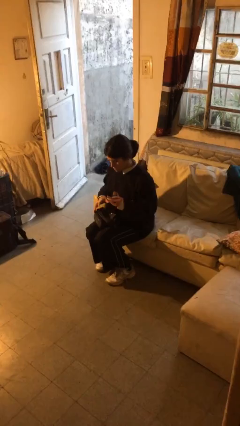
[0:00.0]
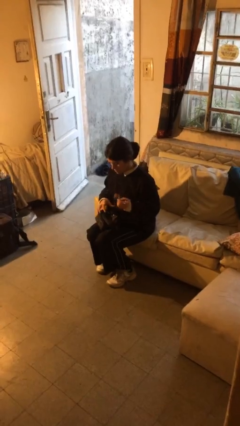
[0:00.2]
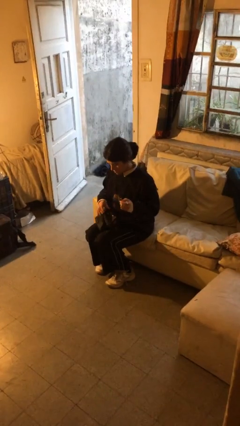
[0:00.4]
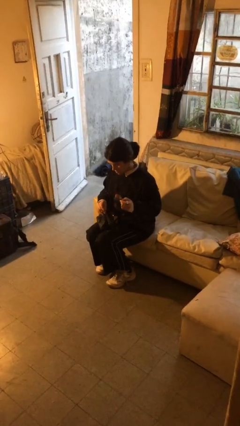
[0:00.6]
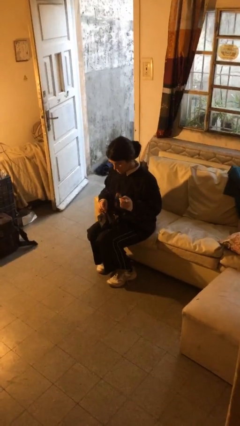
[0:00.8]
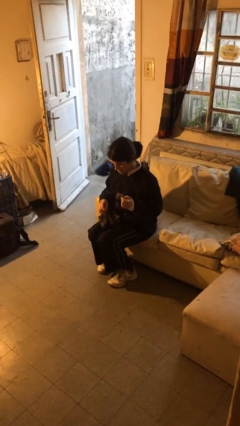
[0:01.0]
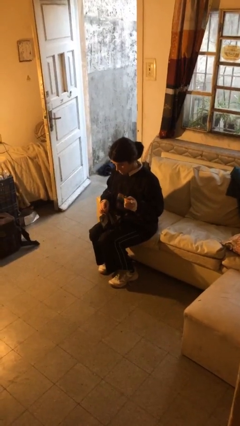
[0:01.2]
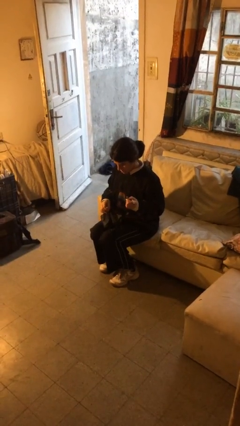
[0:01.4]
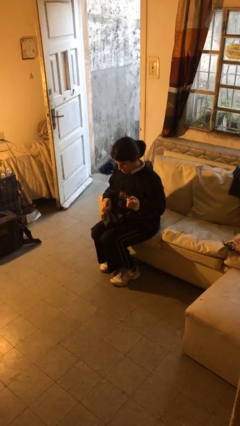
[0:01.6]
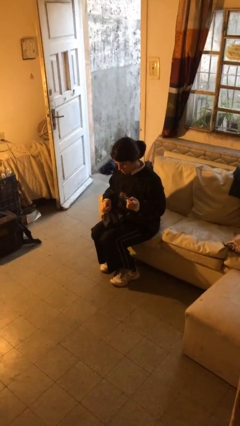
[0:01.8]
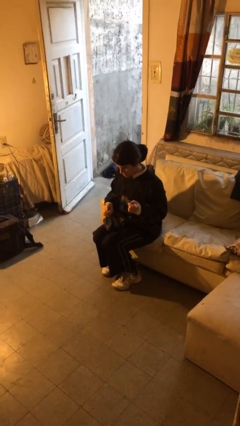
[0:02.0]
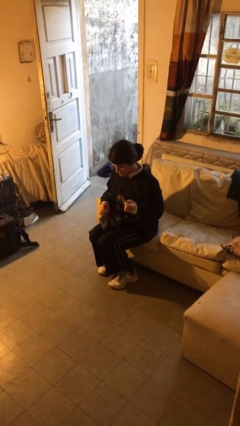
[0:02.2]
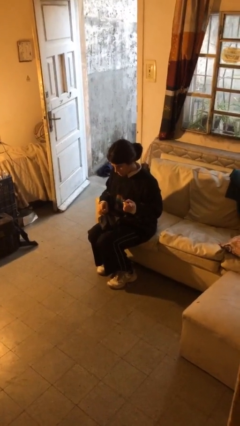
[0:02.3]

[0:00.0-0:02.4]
person takes object from purse

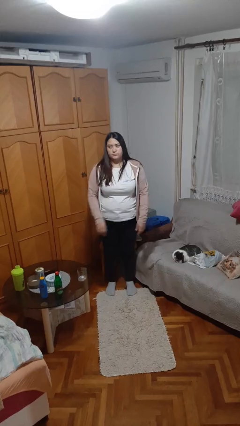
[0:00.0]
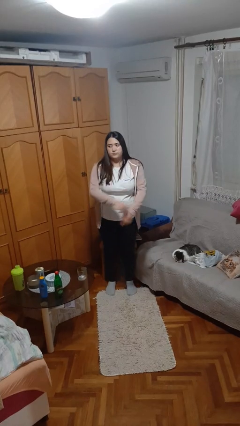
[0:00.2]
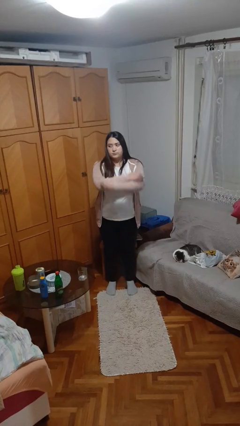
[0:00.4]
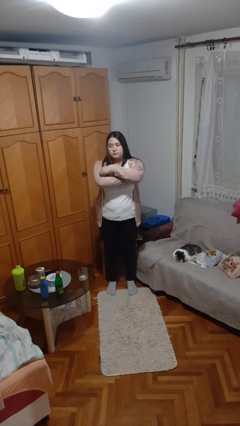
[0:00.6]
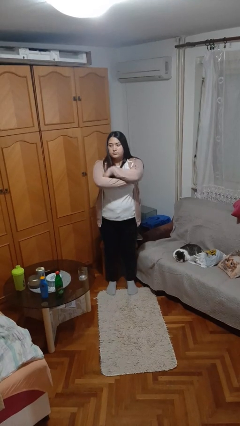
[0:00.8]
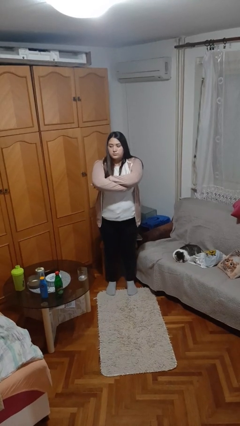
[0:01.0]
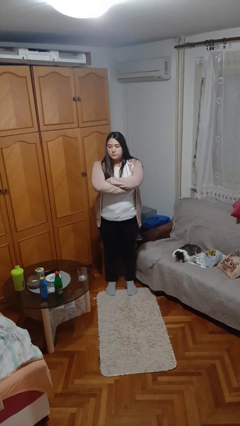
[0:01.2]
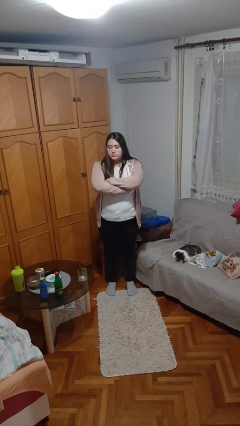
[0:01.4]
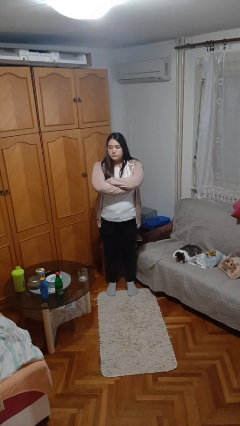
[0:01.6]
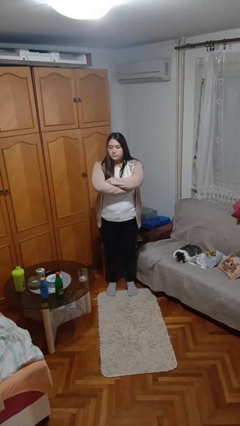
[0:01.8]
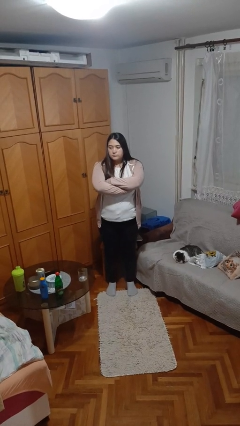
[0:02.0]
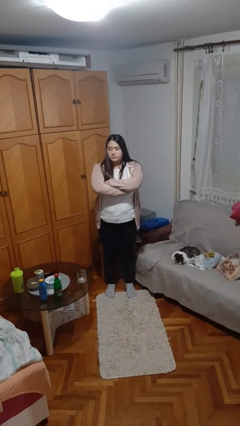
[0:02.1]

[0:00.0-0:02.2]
person crosses arms

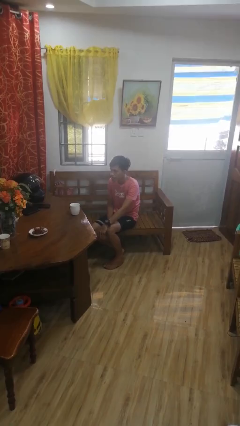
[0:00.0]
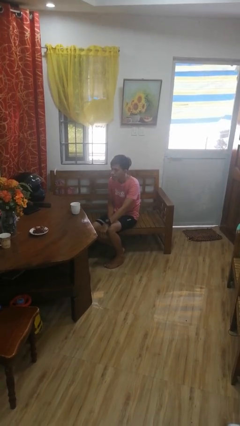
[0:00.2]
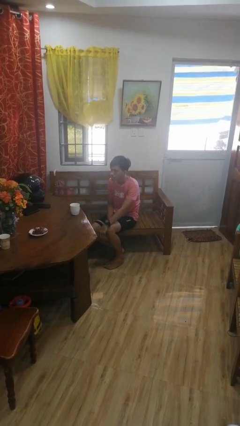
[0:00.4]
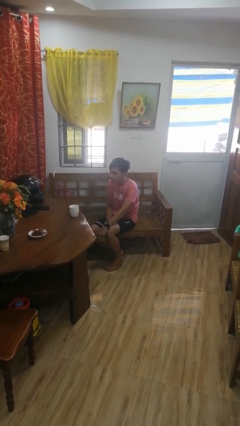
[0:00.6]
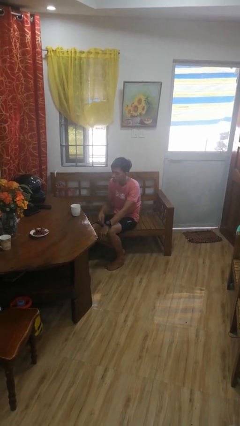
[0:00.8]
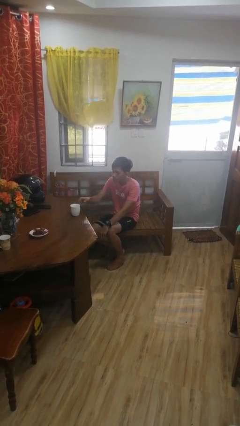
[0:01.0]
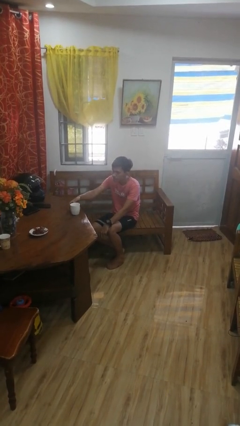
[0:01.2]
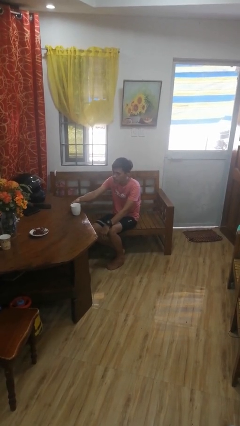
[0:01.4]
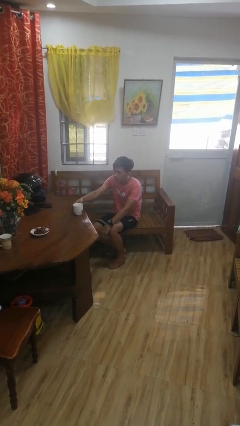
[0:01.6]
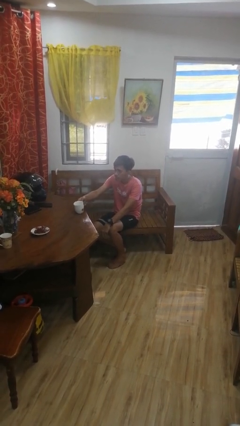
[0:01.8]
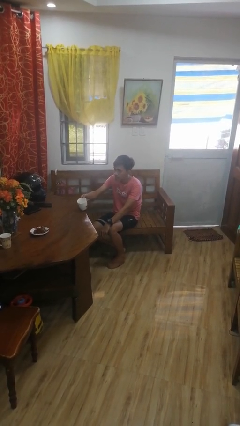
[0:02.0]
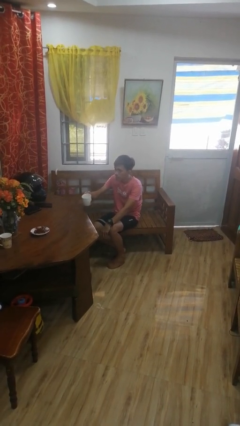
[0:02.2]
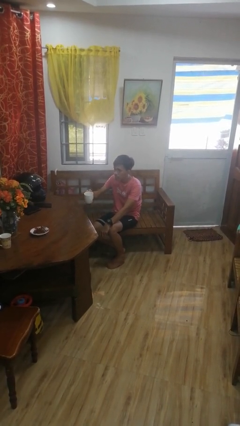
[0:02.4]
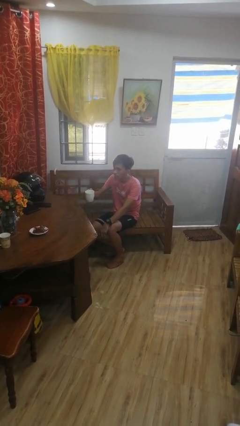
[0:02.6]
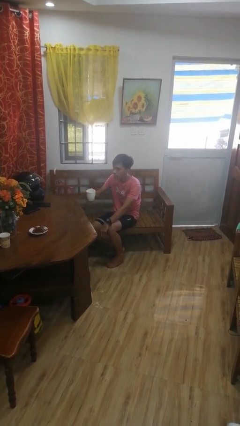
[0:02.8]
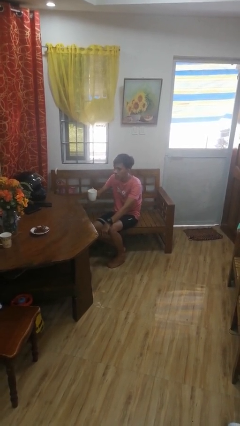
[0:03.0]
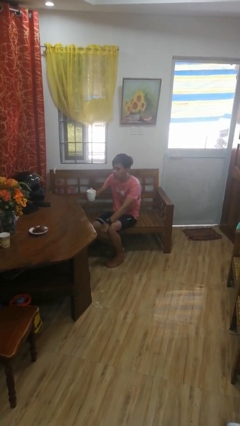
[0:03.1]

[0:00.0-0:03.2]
person picks up object from table

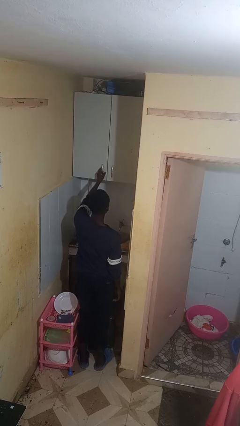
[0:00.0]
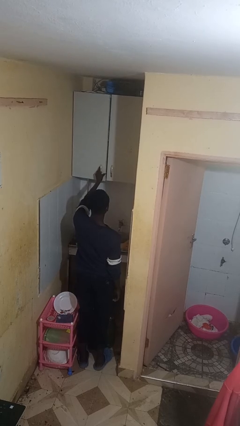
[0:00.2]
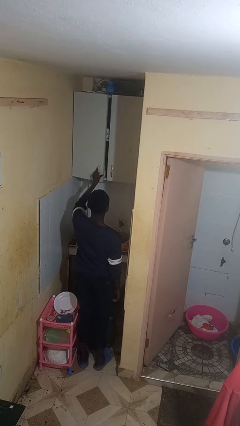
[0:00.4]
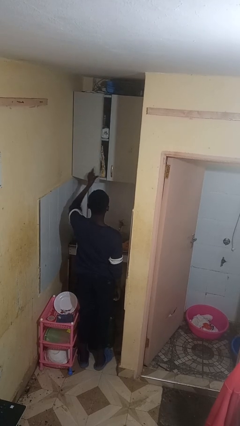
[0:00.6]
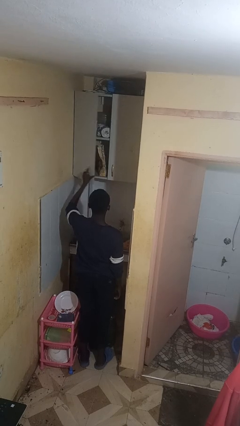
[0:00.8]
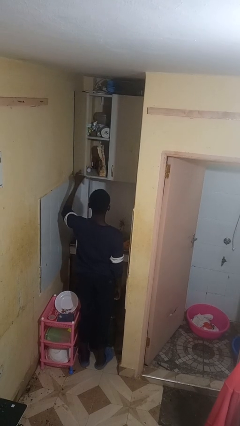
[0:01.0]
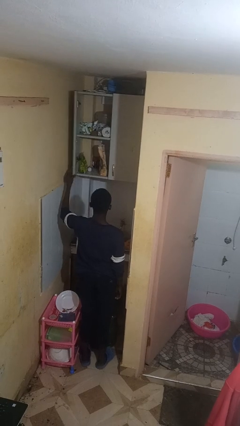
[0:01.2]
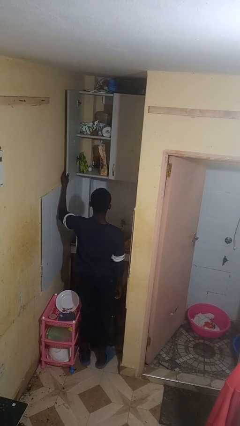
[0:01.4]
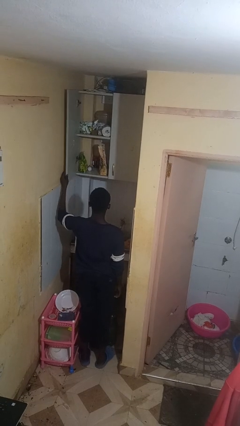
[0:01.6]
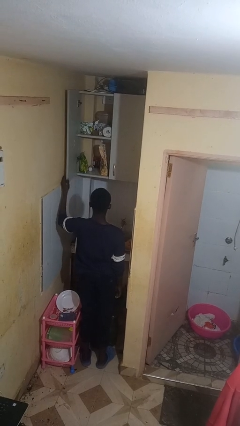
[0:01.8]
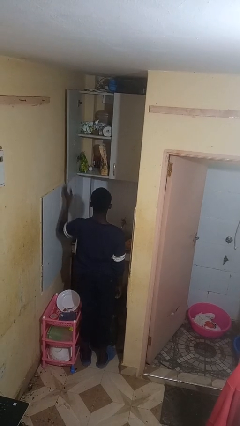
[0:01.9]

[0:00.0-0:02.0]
person opens cabinet

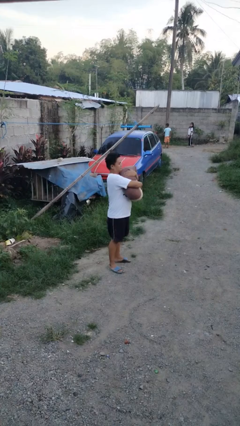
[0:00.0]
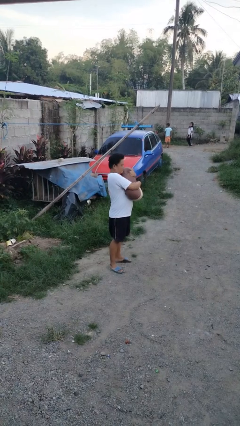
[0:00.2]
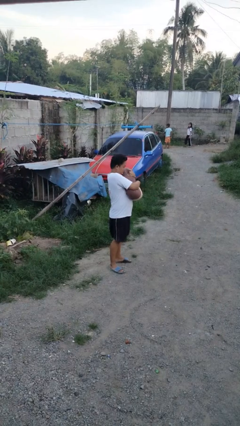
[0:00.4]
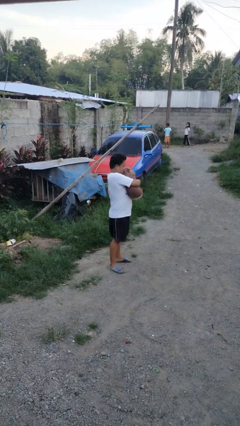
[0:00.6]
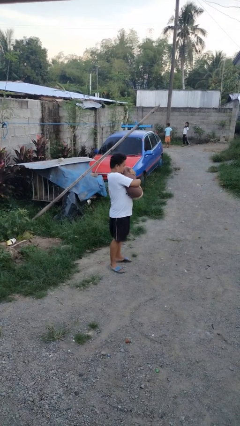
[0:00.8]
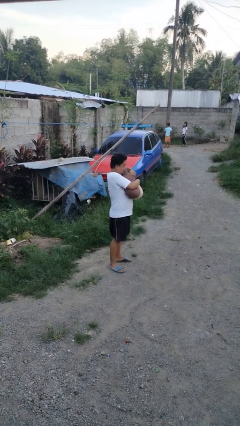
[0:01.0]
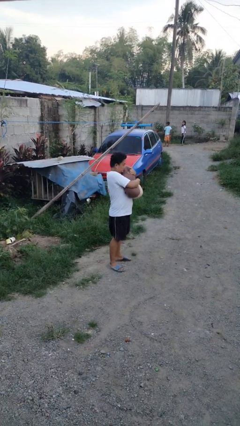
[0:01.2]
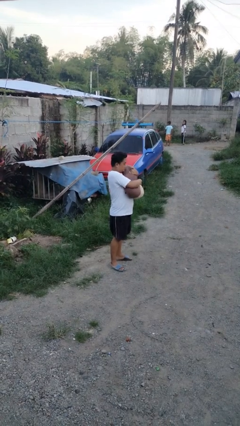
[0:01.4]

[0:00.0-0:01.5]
person squeezes object

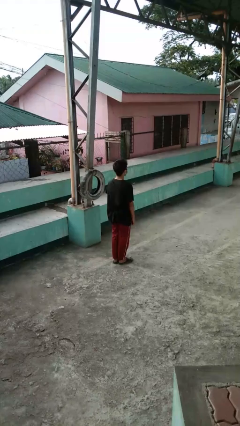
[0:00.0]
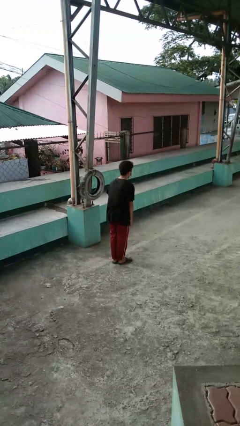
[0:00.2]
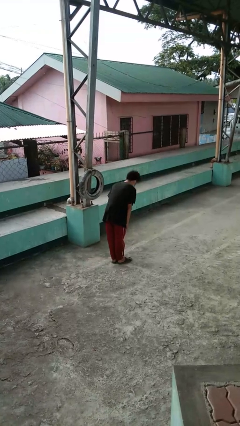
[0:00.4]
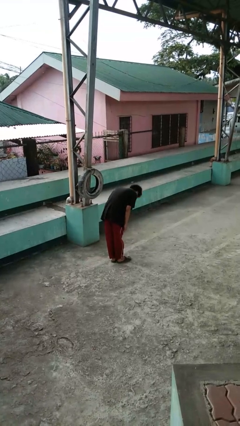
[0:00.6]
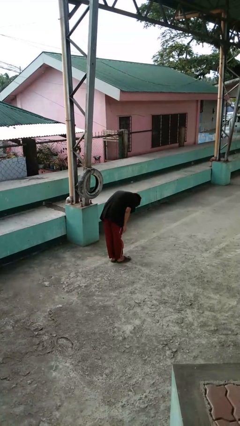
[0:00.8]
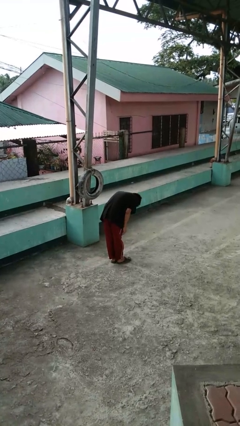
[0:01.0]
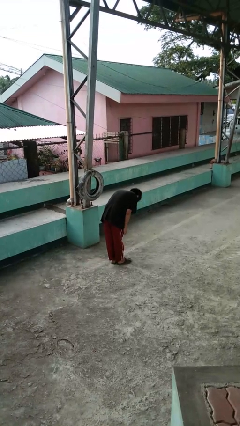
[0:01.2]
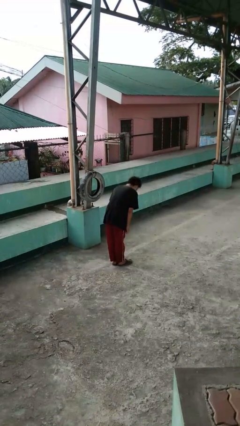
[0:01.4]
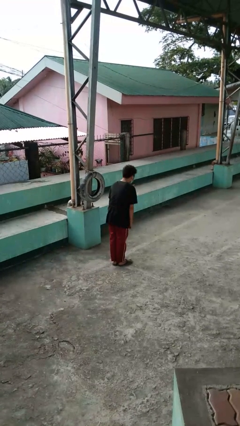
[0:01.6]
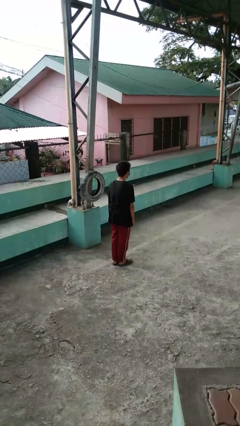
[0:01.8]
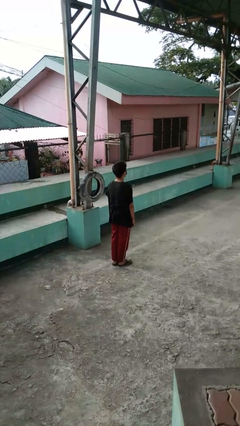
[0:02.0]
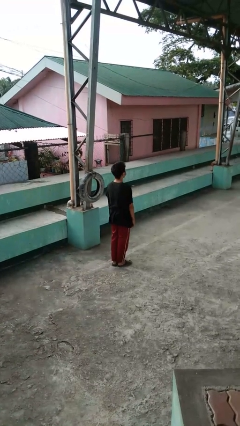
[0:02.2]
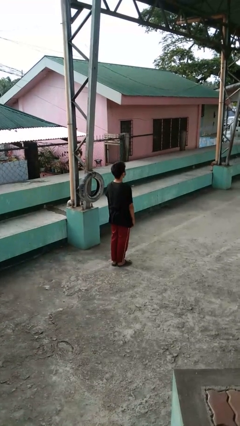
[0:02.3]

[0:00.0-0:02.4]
person bows

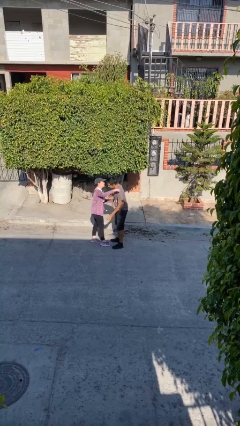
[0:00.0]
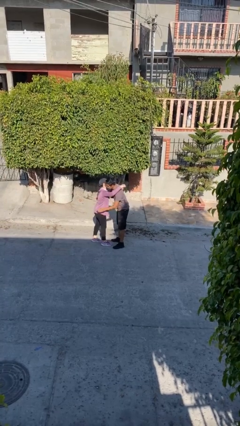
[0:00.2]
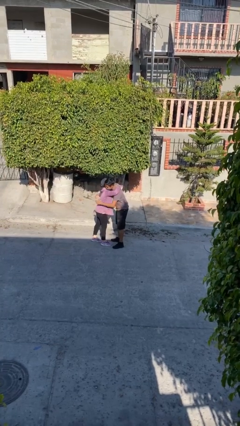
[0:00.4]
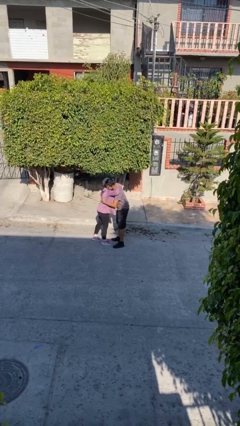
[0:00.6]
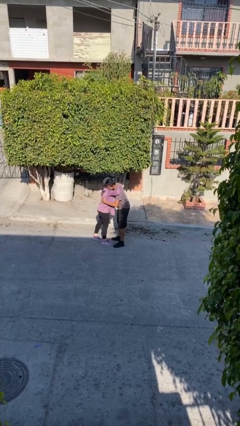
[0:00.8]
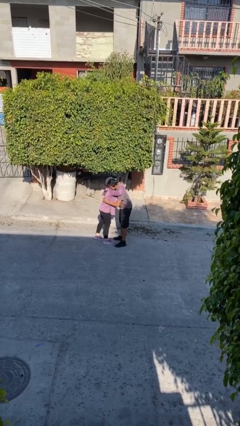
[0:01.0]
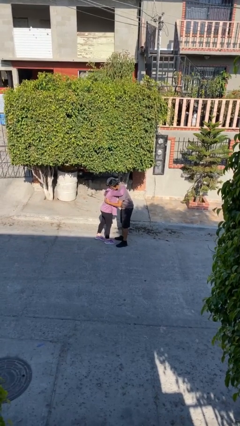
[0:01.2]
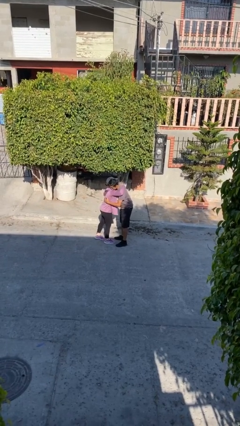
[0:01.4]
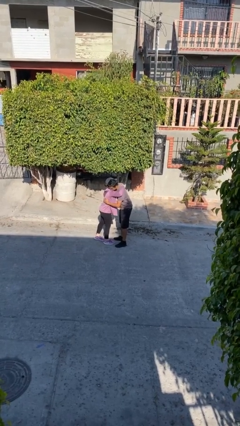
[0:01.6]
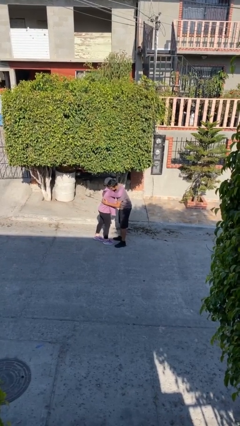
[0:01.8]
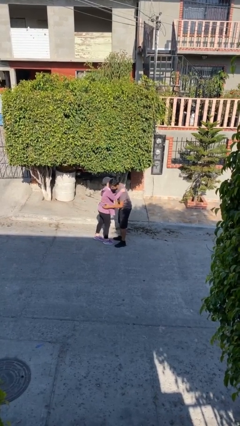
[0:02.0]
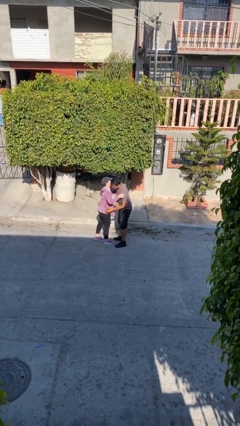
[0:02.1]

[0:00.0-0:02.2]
person embraces person

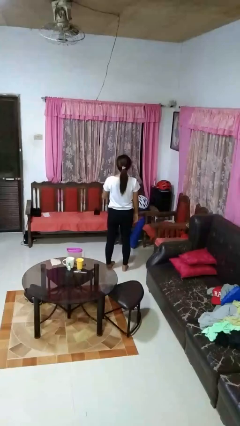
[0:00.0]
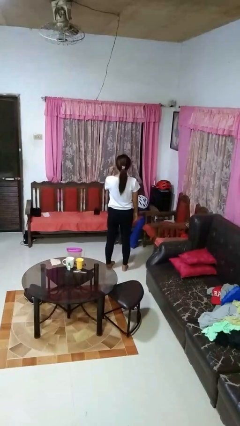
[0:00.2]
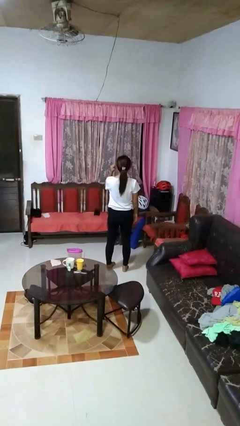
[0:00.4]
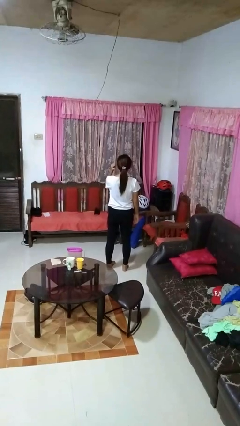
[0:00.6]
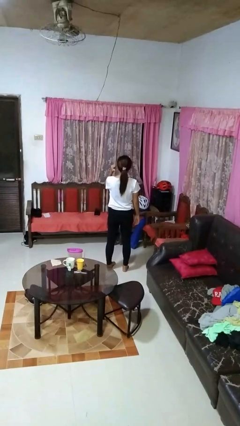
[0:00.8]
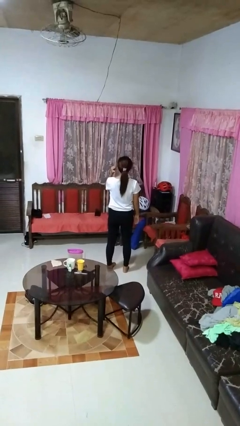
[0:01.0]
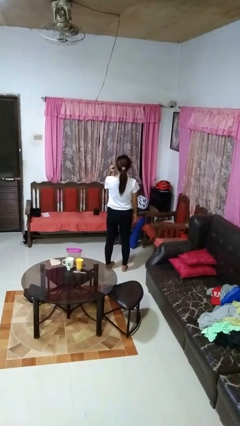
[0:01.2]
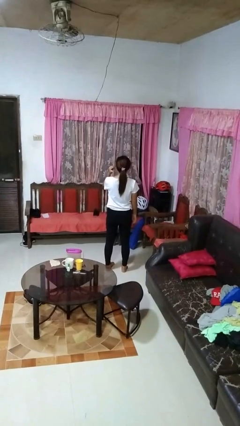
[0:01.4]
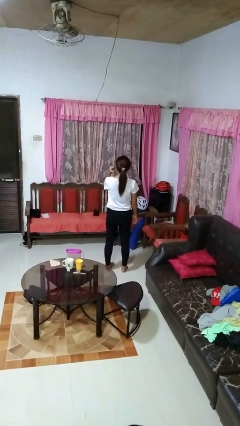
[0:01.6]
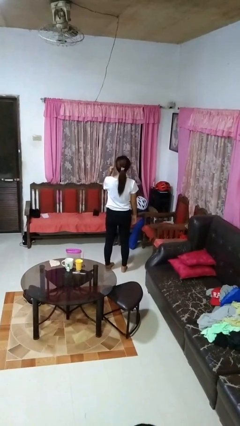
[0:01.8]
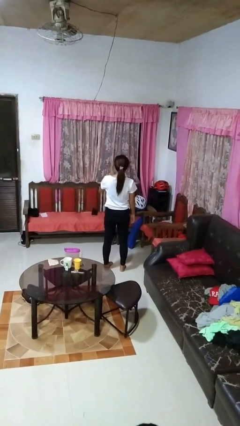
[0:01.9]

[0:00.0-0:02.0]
person gestures behind me
